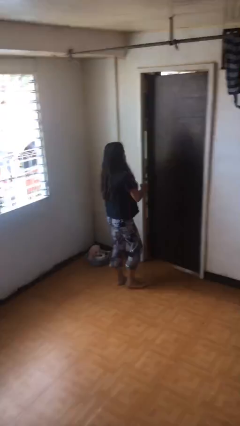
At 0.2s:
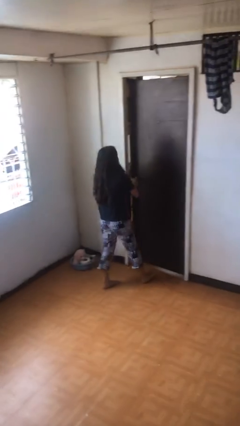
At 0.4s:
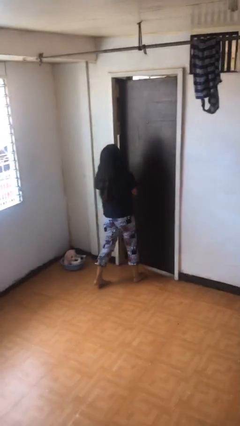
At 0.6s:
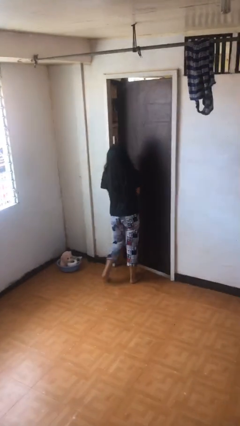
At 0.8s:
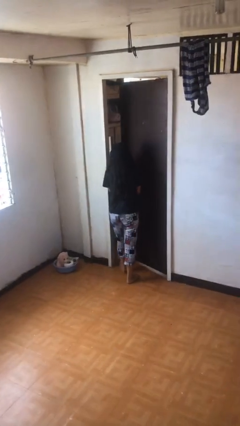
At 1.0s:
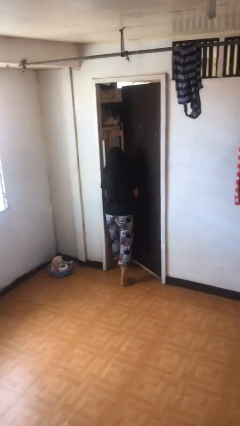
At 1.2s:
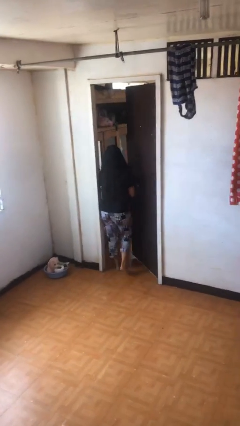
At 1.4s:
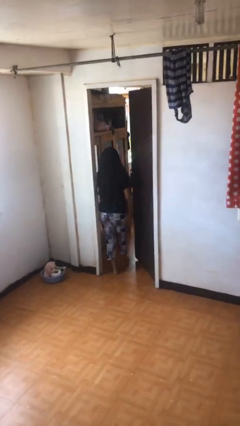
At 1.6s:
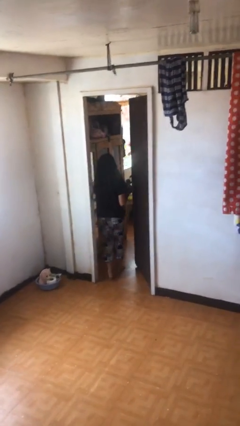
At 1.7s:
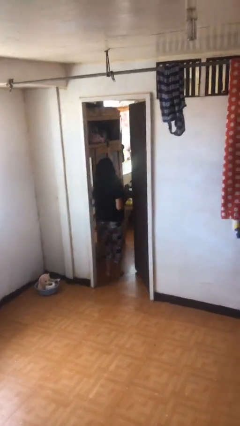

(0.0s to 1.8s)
person opens facility door

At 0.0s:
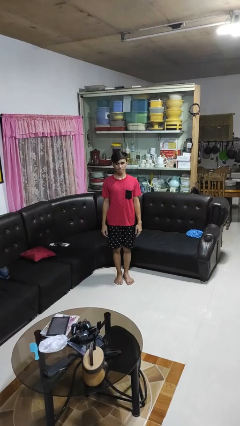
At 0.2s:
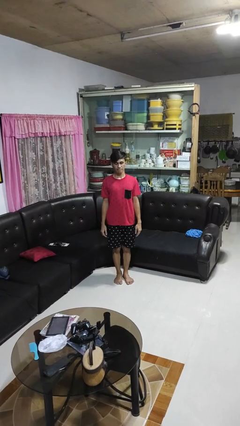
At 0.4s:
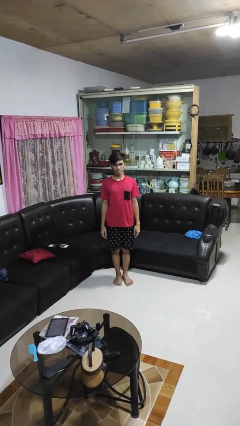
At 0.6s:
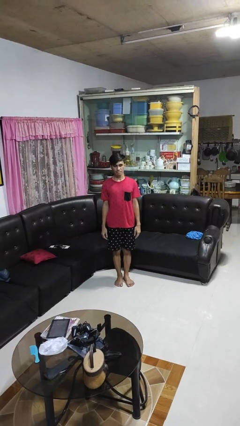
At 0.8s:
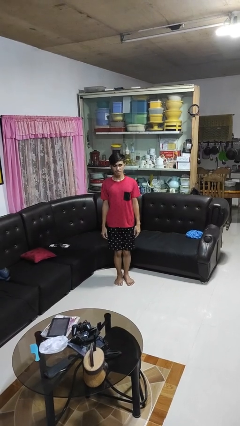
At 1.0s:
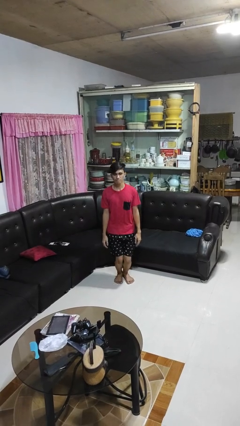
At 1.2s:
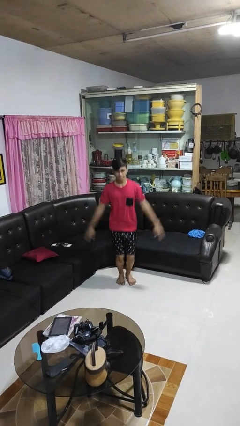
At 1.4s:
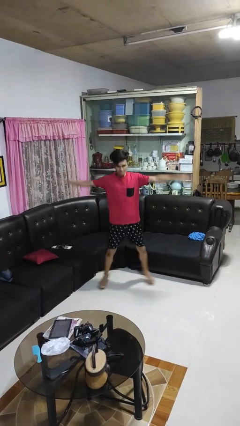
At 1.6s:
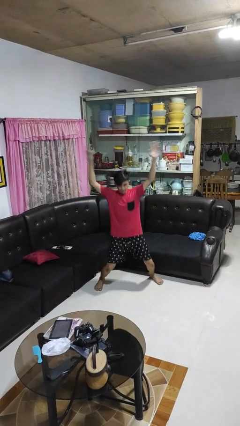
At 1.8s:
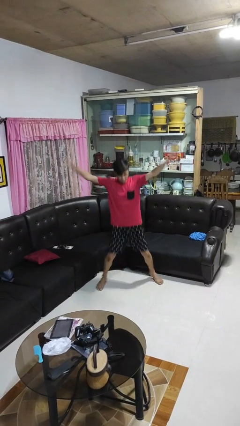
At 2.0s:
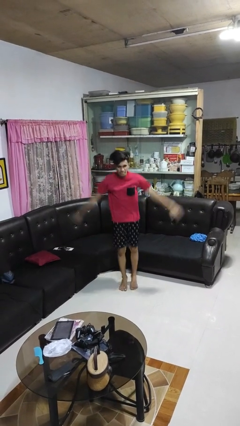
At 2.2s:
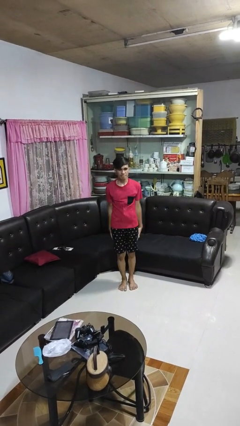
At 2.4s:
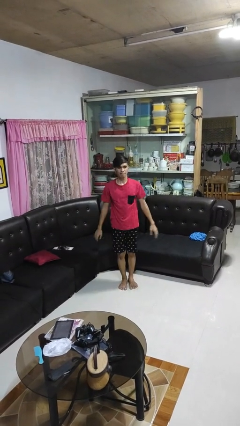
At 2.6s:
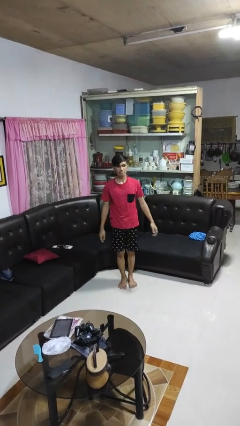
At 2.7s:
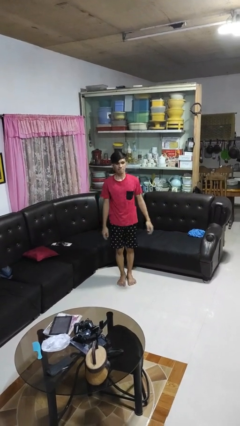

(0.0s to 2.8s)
person exercises with jumping jacks

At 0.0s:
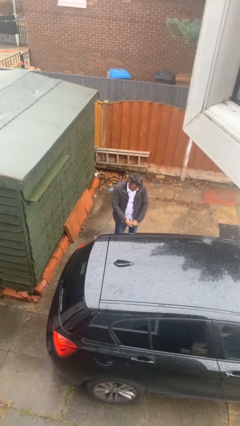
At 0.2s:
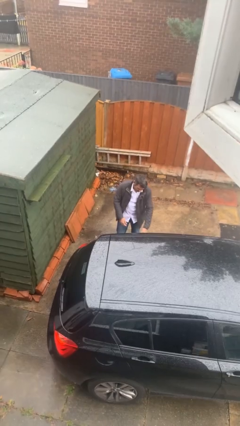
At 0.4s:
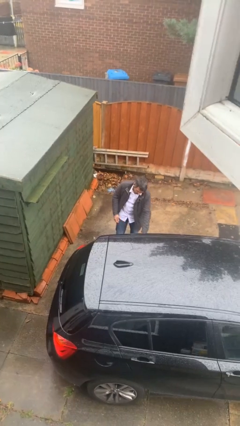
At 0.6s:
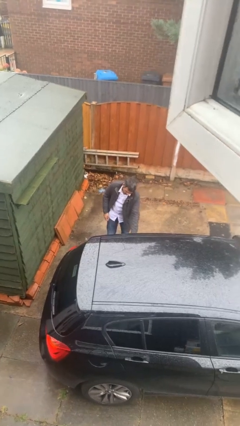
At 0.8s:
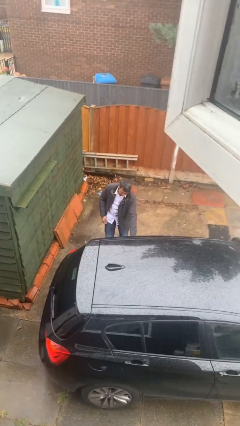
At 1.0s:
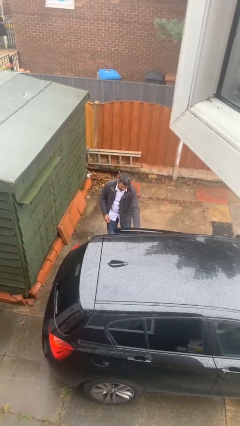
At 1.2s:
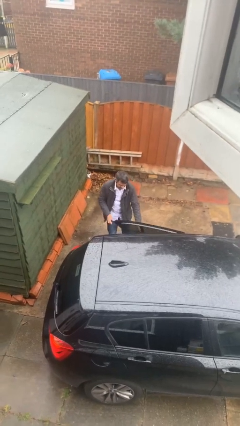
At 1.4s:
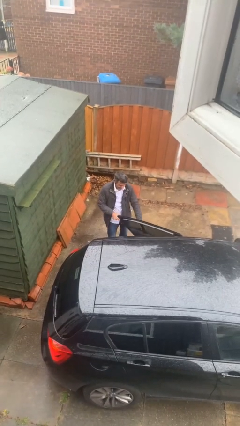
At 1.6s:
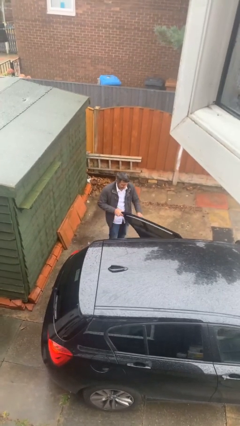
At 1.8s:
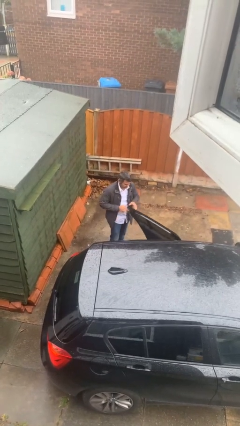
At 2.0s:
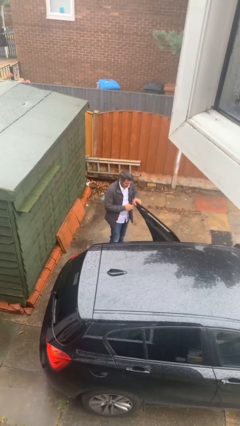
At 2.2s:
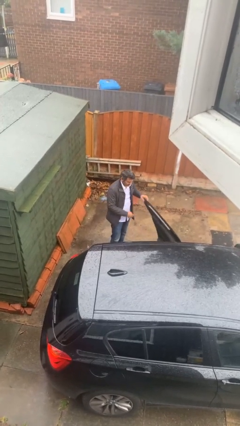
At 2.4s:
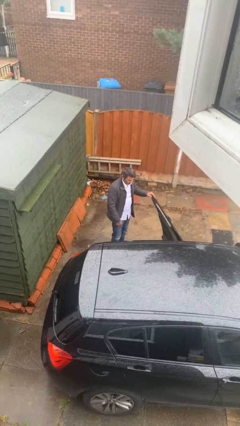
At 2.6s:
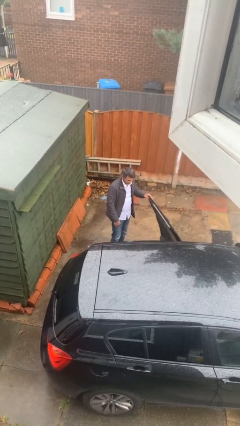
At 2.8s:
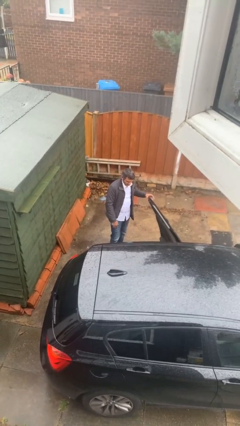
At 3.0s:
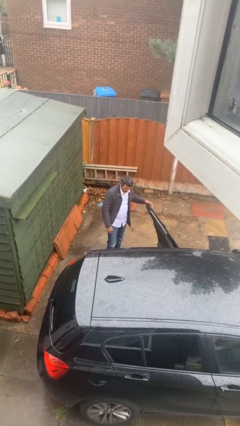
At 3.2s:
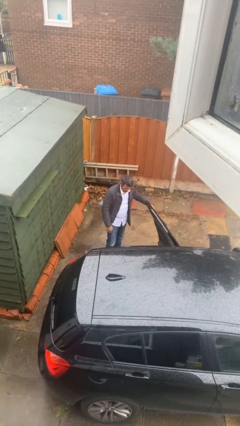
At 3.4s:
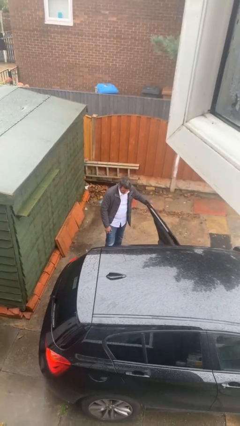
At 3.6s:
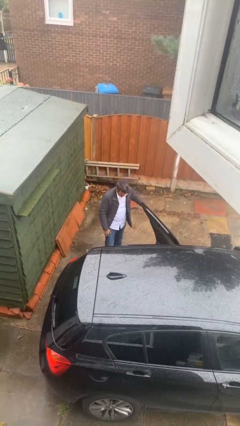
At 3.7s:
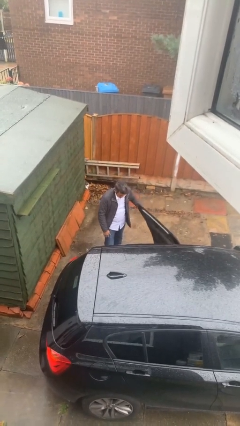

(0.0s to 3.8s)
person opens car door

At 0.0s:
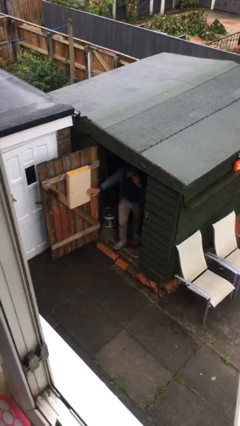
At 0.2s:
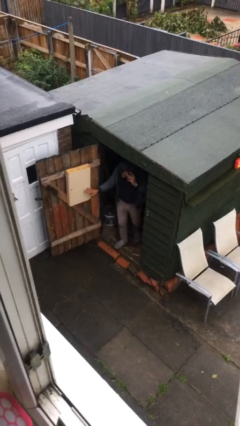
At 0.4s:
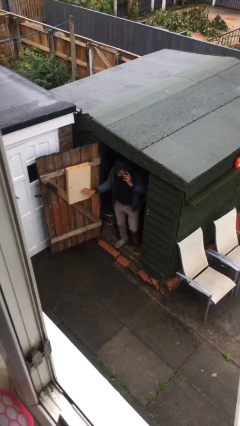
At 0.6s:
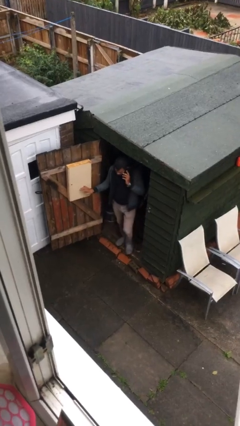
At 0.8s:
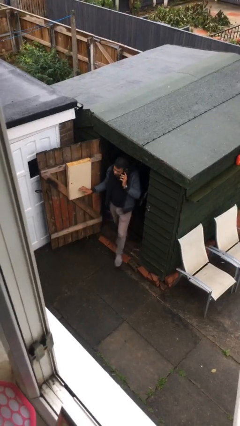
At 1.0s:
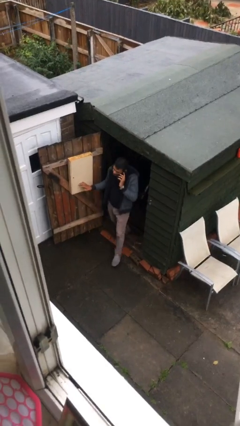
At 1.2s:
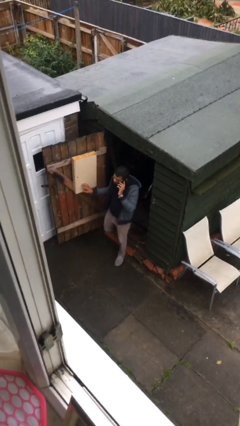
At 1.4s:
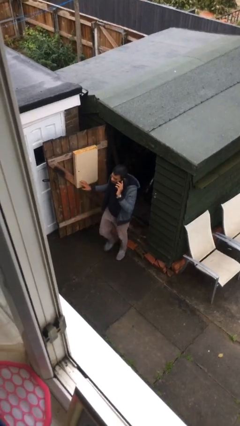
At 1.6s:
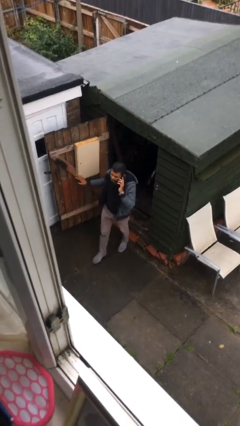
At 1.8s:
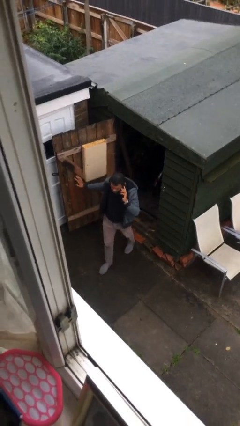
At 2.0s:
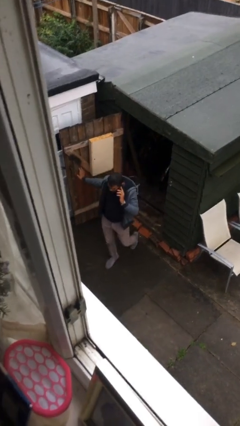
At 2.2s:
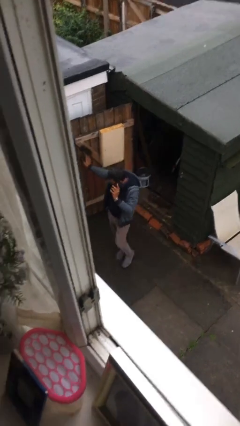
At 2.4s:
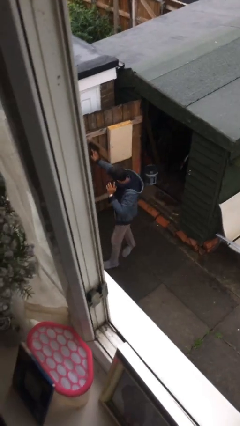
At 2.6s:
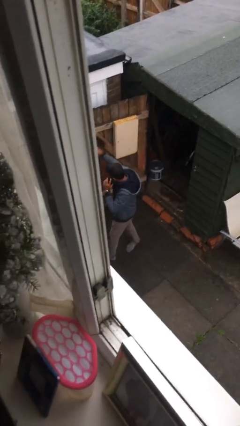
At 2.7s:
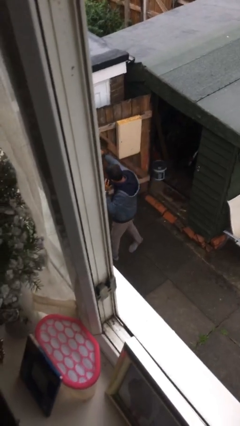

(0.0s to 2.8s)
person enters scene through structure

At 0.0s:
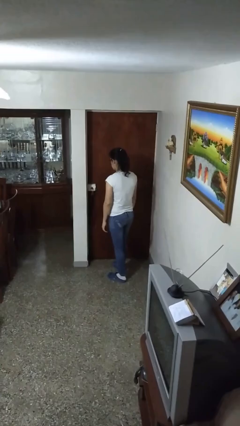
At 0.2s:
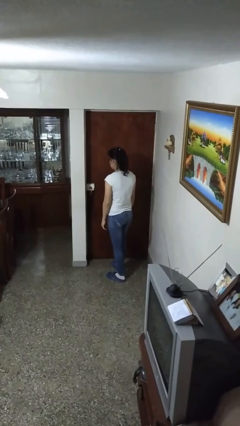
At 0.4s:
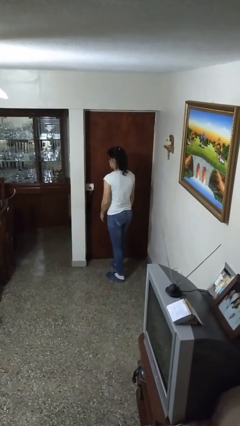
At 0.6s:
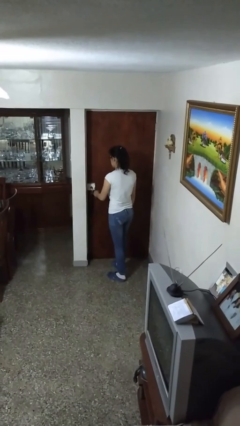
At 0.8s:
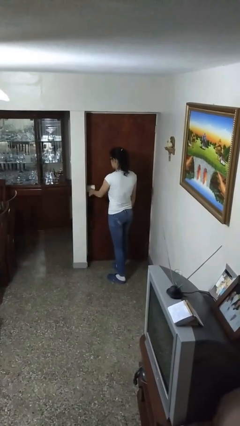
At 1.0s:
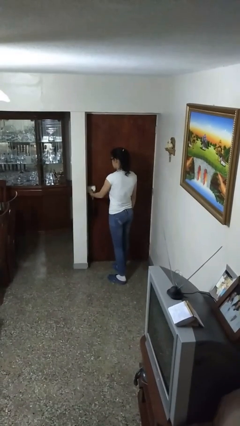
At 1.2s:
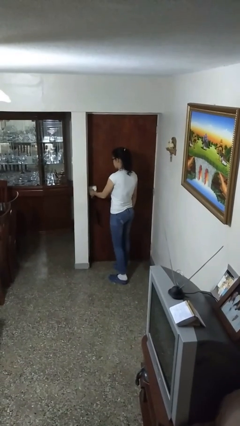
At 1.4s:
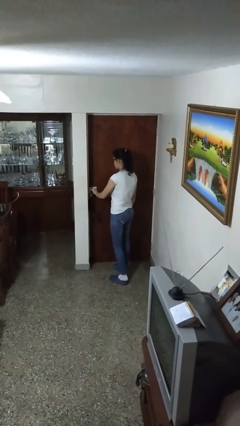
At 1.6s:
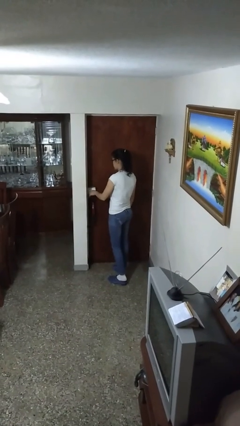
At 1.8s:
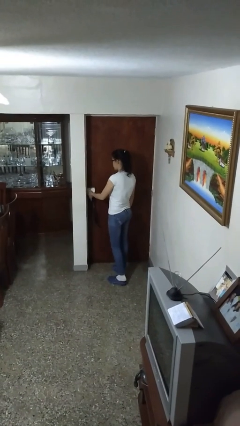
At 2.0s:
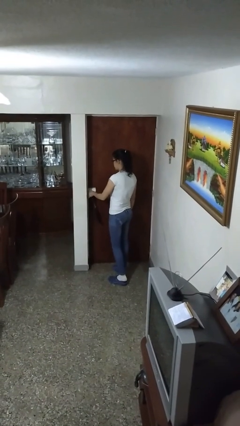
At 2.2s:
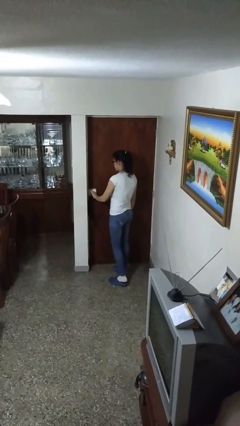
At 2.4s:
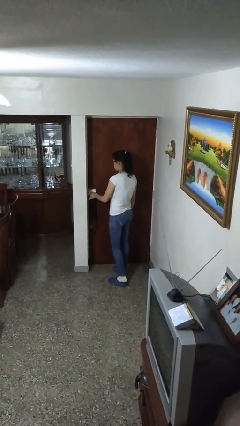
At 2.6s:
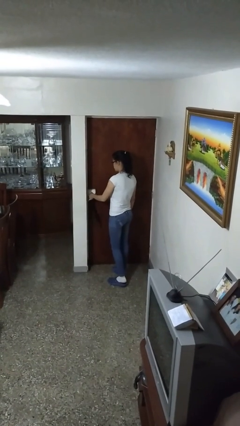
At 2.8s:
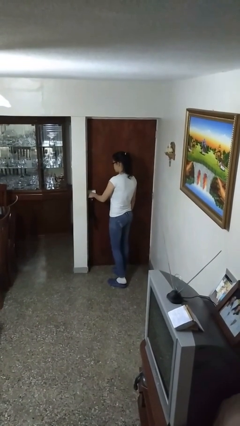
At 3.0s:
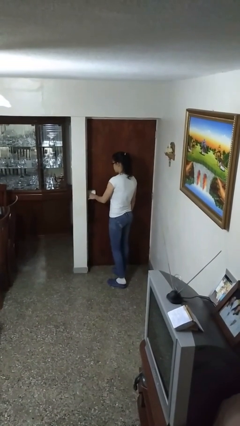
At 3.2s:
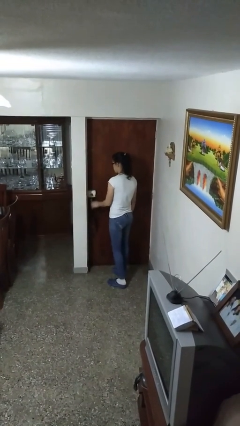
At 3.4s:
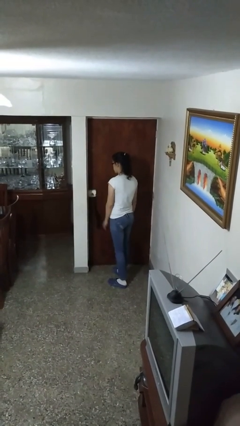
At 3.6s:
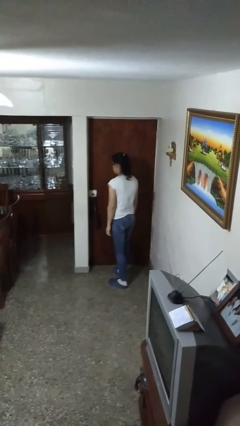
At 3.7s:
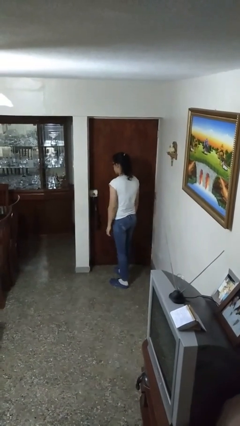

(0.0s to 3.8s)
person unlocks door with keys

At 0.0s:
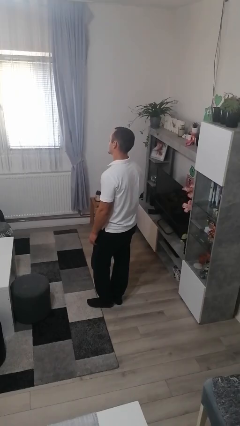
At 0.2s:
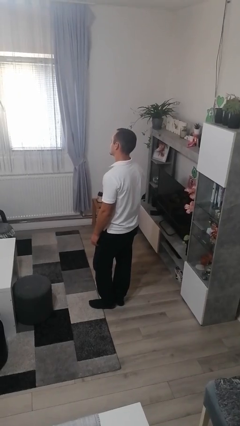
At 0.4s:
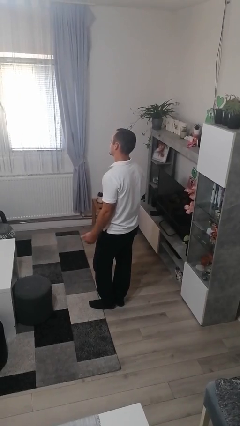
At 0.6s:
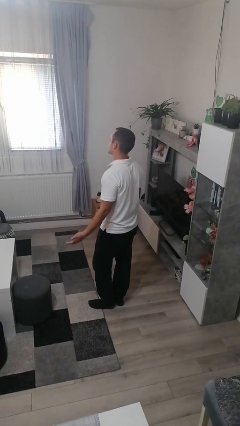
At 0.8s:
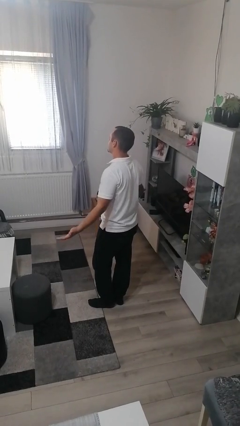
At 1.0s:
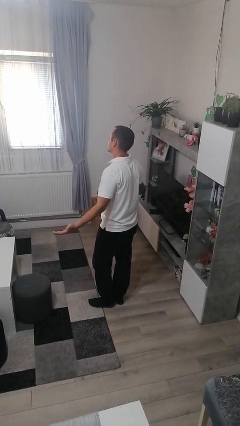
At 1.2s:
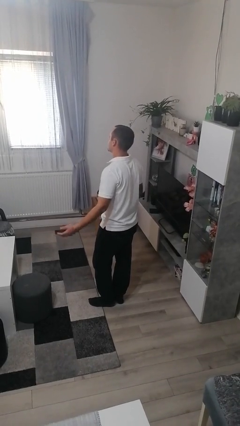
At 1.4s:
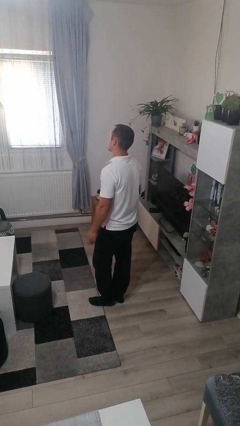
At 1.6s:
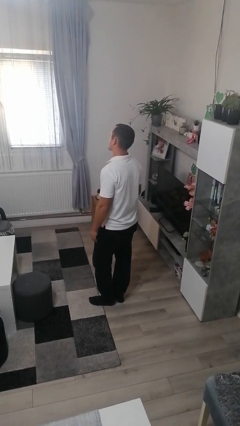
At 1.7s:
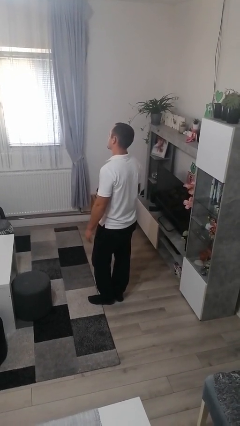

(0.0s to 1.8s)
person shrugs

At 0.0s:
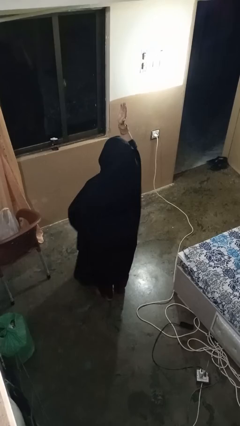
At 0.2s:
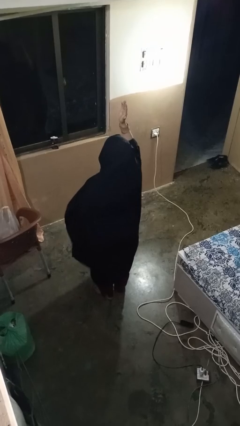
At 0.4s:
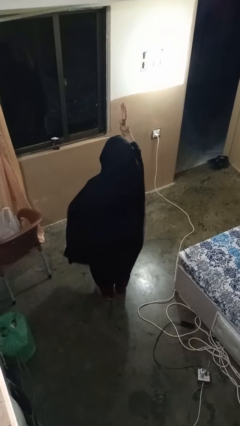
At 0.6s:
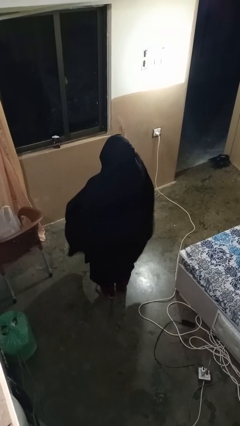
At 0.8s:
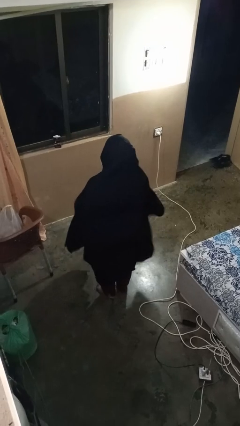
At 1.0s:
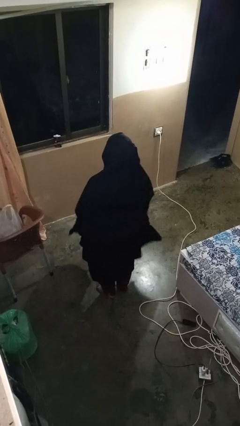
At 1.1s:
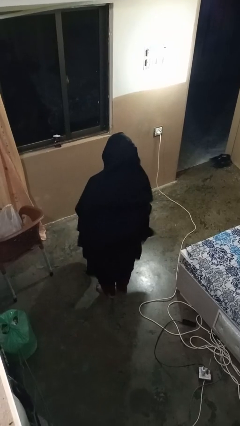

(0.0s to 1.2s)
person gestures lower hand
